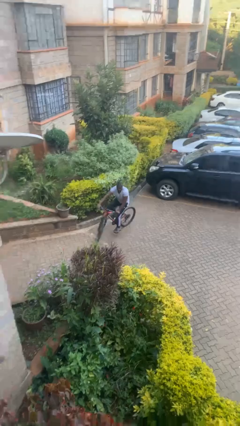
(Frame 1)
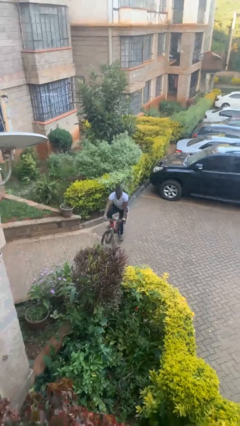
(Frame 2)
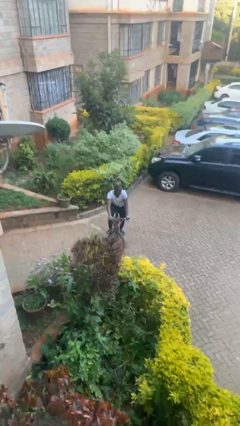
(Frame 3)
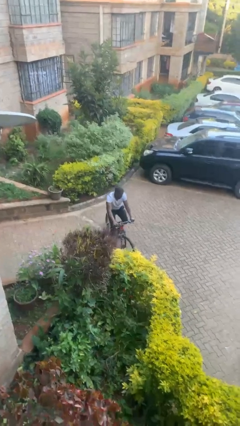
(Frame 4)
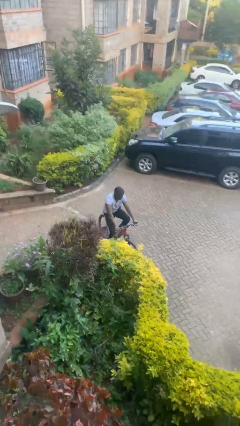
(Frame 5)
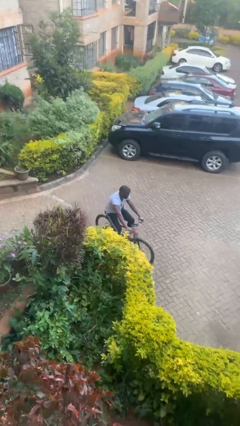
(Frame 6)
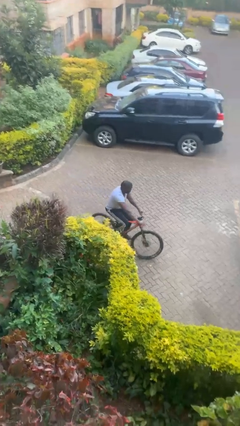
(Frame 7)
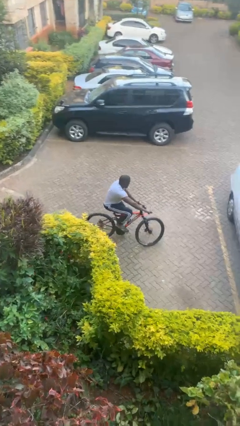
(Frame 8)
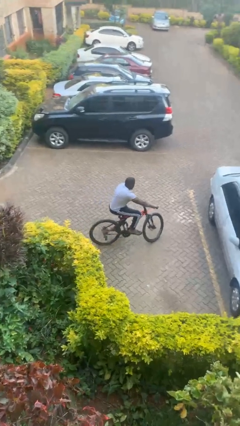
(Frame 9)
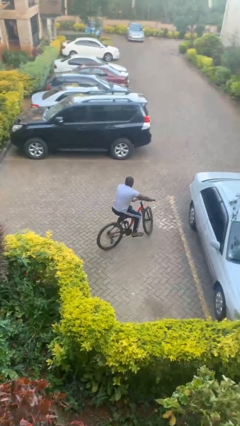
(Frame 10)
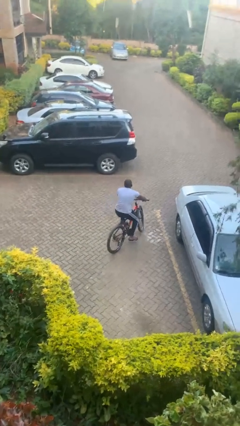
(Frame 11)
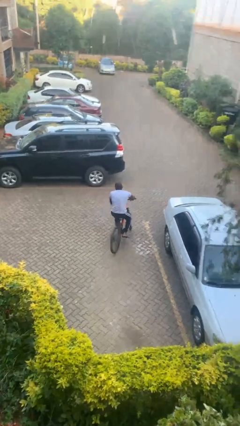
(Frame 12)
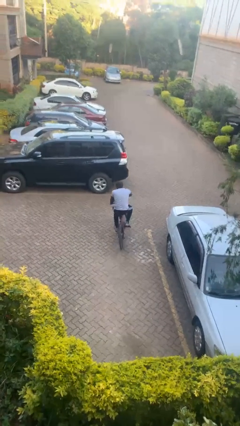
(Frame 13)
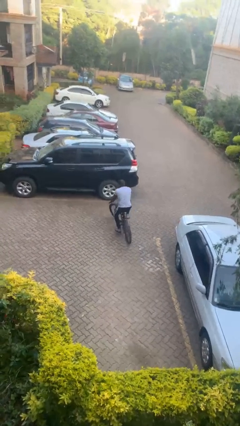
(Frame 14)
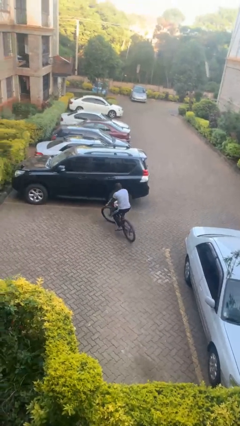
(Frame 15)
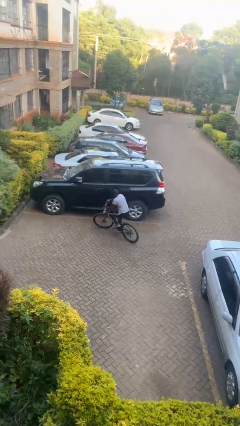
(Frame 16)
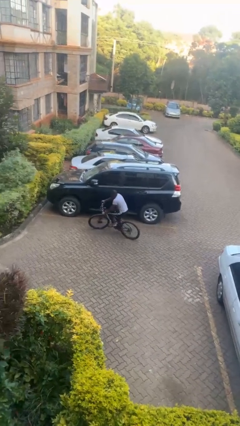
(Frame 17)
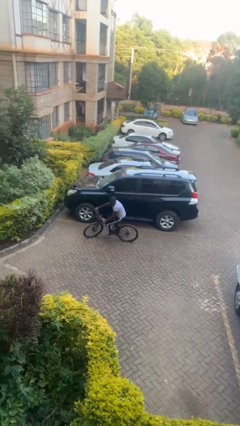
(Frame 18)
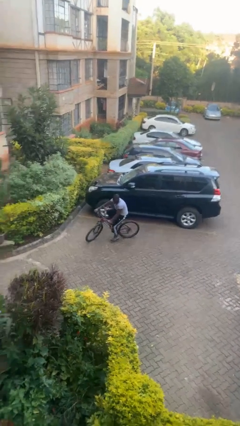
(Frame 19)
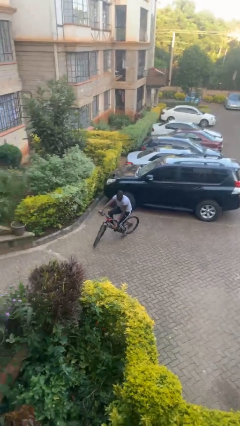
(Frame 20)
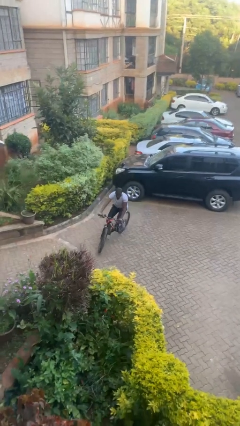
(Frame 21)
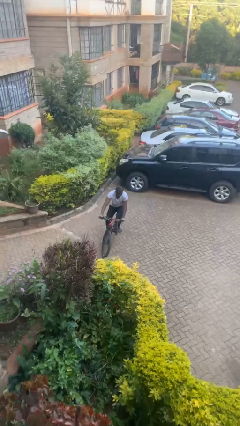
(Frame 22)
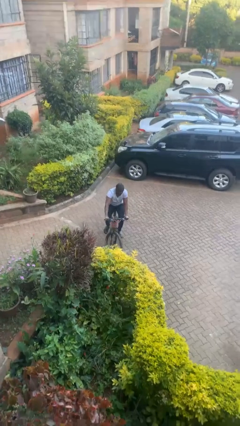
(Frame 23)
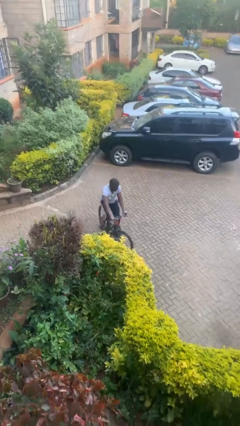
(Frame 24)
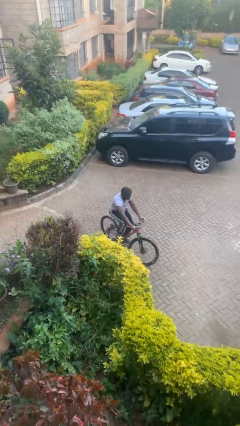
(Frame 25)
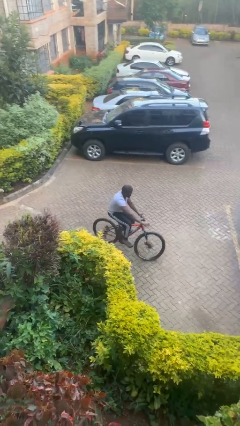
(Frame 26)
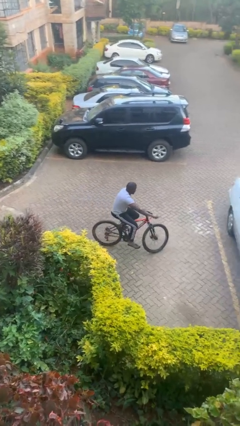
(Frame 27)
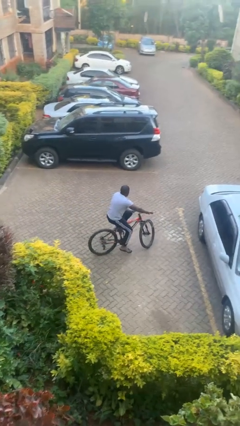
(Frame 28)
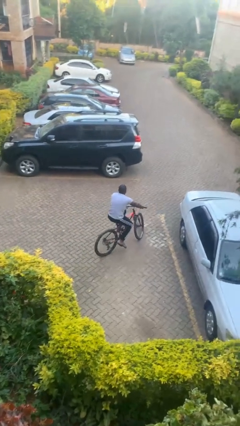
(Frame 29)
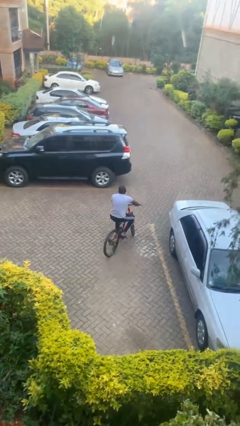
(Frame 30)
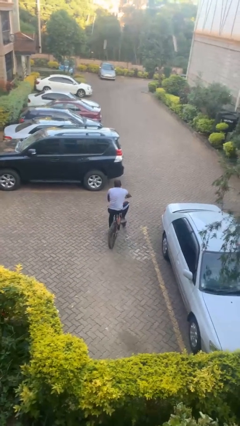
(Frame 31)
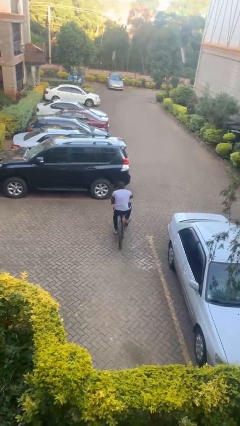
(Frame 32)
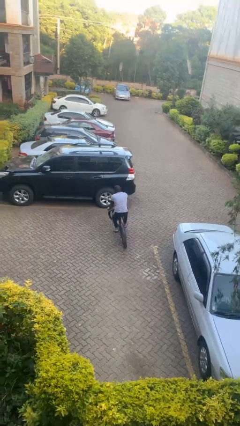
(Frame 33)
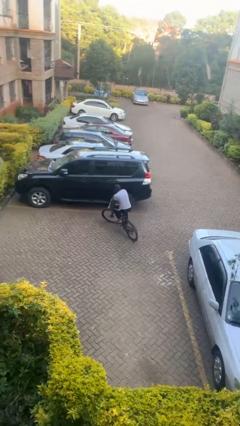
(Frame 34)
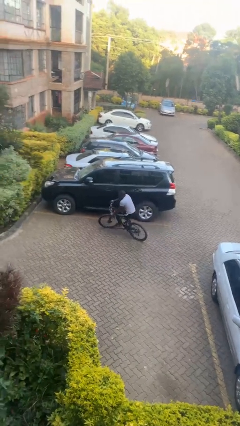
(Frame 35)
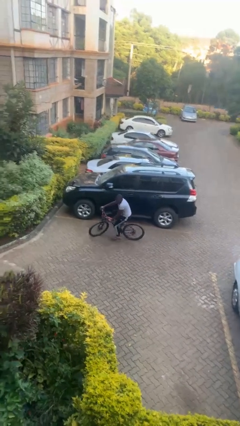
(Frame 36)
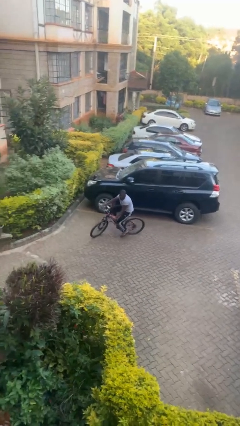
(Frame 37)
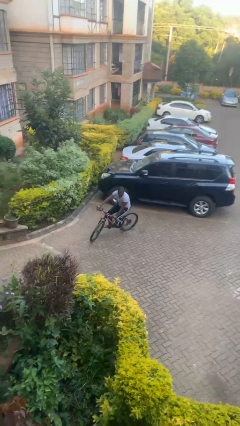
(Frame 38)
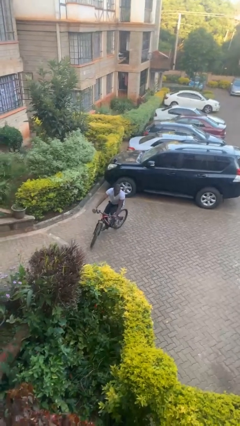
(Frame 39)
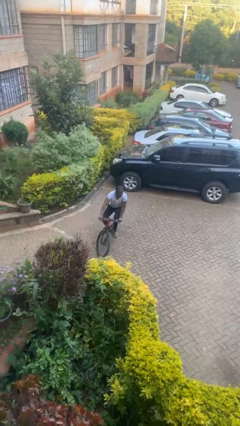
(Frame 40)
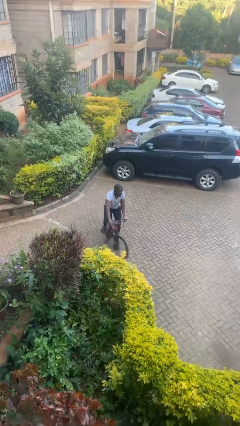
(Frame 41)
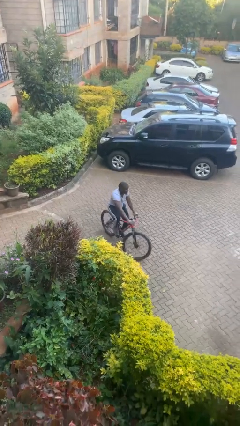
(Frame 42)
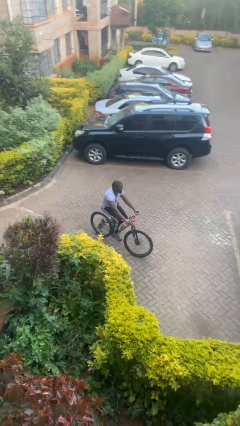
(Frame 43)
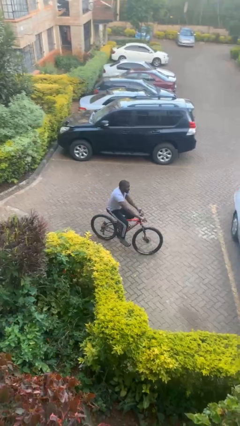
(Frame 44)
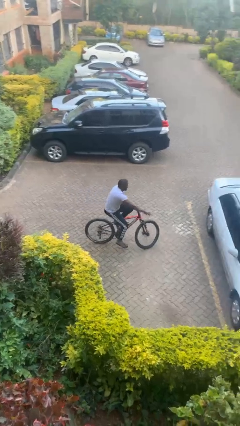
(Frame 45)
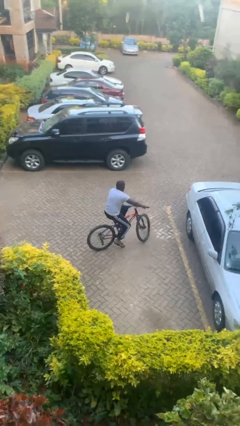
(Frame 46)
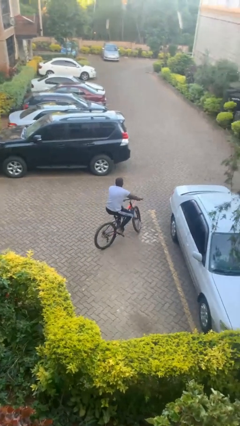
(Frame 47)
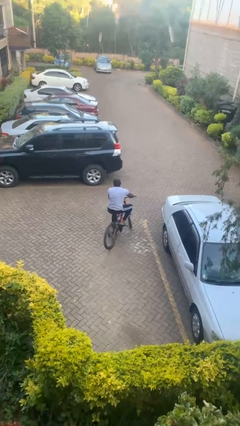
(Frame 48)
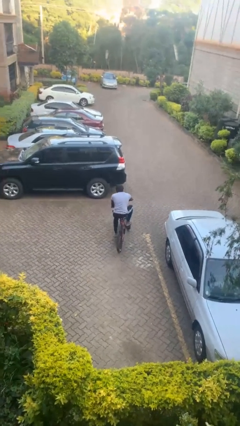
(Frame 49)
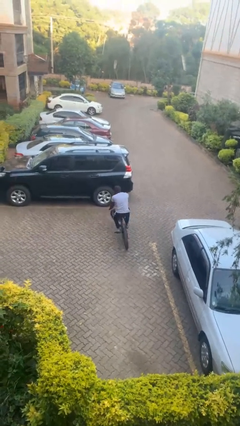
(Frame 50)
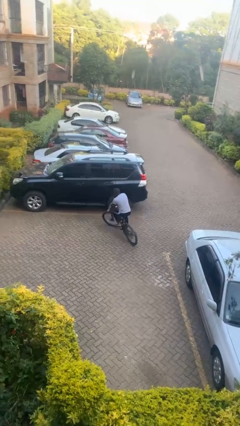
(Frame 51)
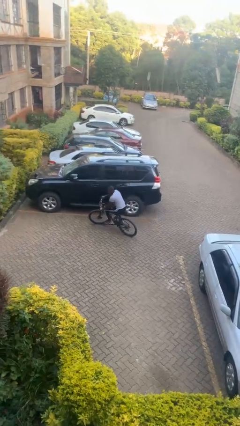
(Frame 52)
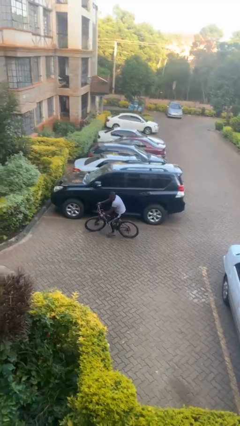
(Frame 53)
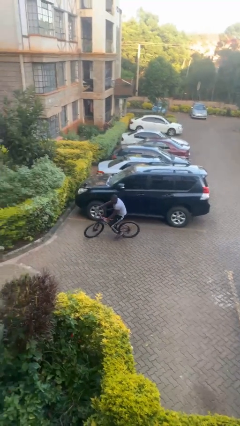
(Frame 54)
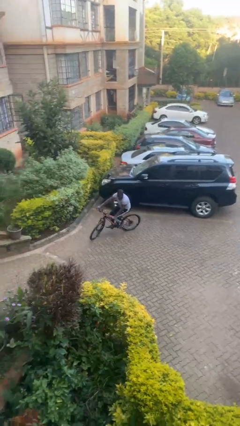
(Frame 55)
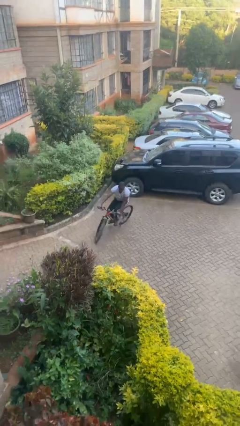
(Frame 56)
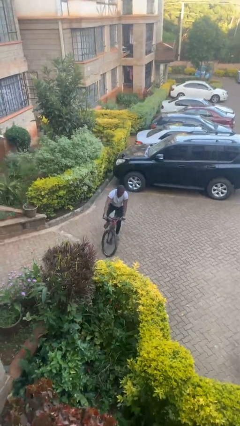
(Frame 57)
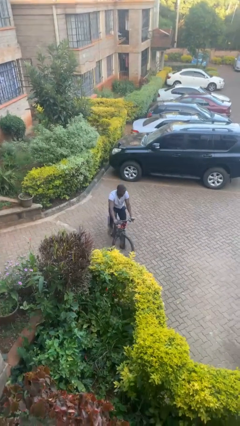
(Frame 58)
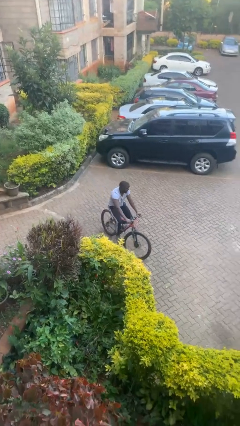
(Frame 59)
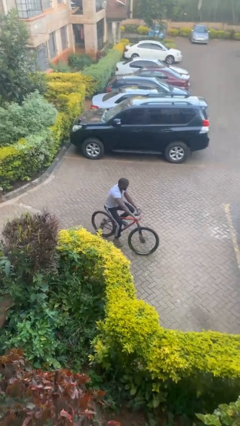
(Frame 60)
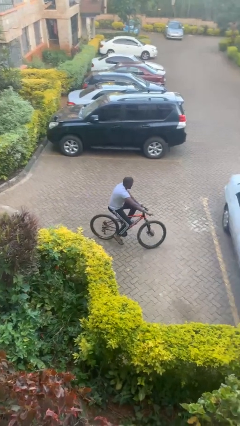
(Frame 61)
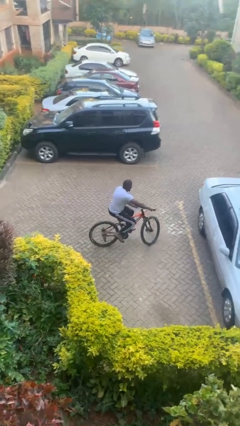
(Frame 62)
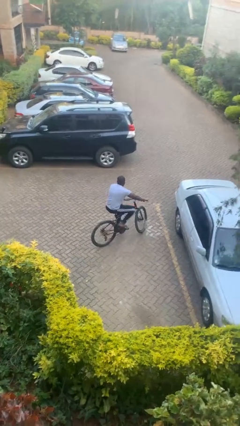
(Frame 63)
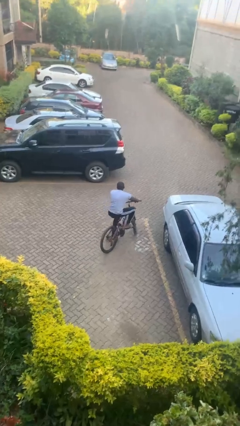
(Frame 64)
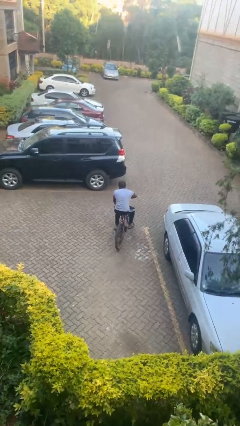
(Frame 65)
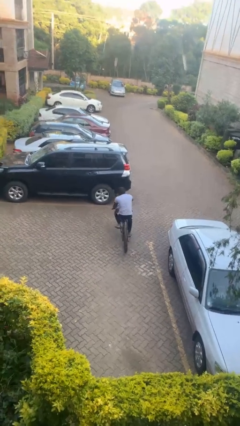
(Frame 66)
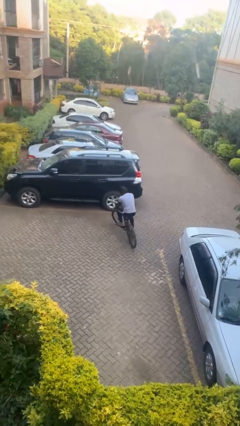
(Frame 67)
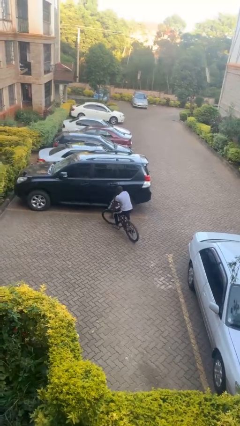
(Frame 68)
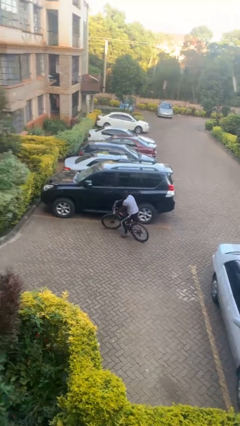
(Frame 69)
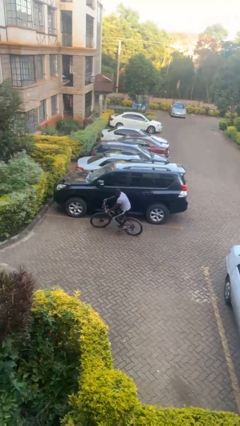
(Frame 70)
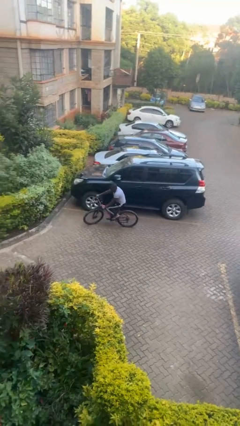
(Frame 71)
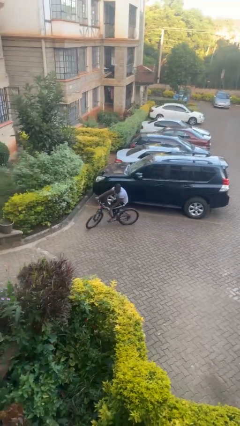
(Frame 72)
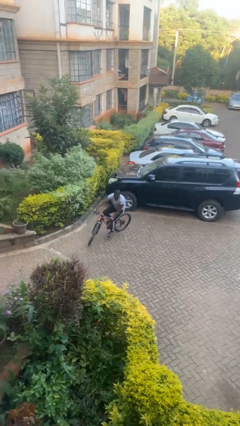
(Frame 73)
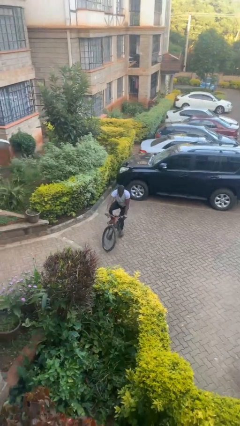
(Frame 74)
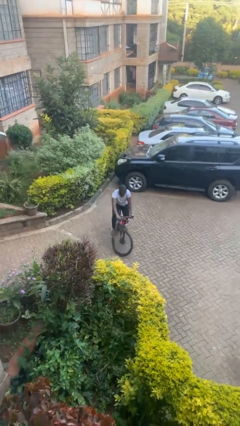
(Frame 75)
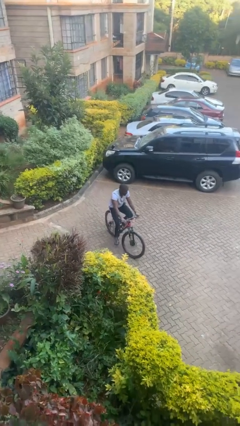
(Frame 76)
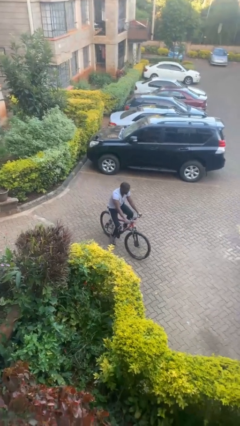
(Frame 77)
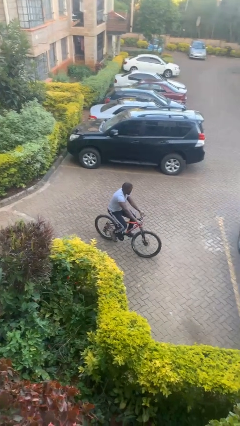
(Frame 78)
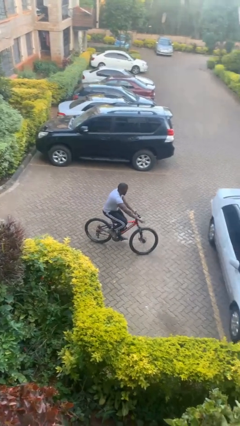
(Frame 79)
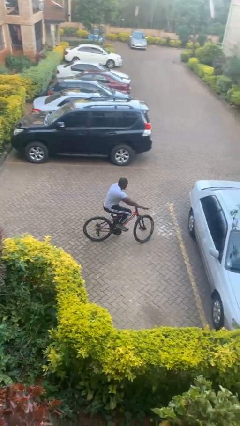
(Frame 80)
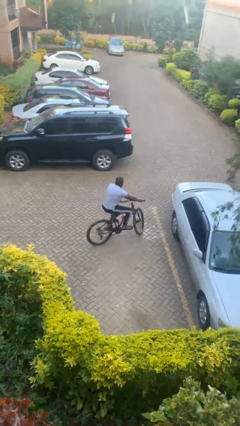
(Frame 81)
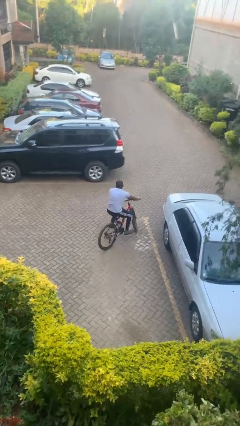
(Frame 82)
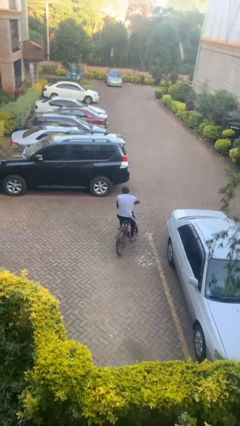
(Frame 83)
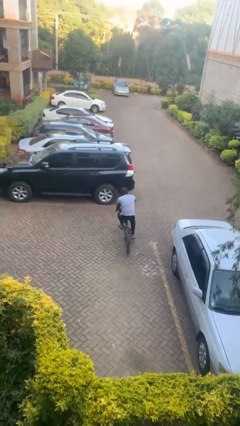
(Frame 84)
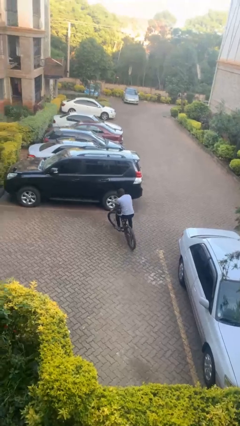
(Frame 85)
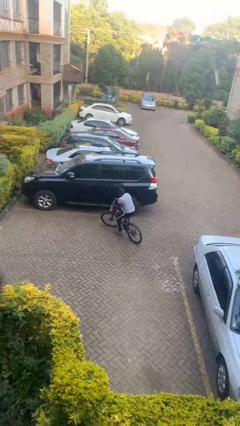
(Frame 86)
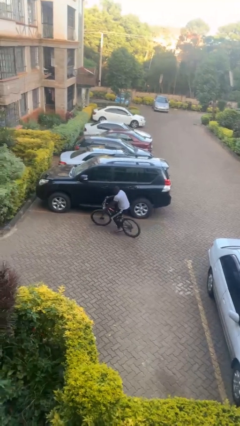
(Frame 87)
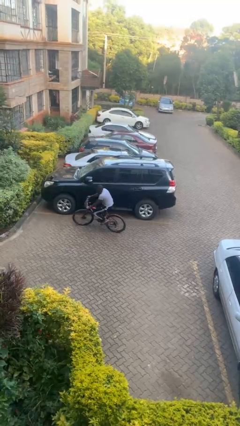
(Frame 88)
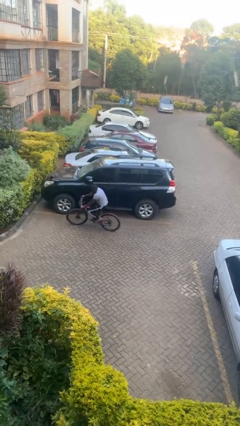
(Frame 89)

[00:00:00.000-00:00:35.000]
person rides bicycle

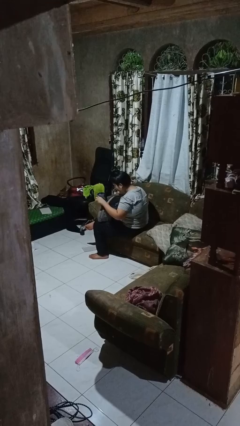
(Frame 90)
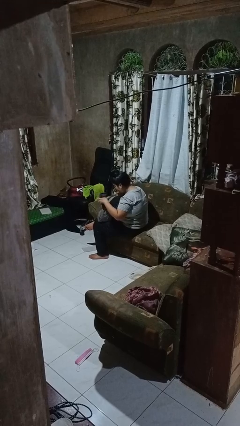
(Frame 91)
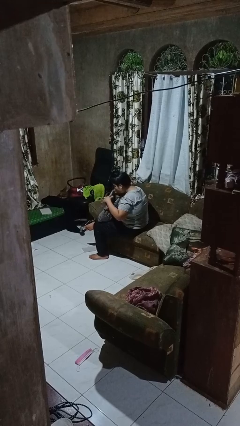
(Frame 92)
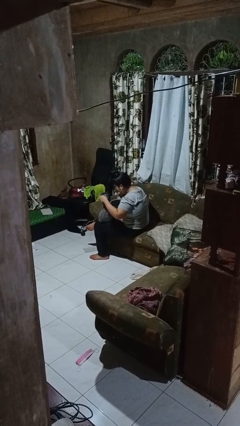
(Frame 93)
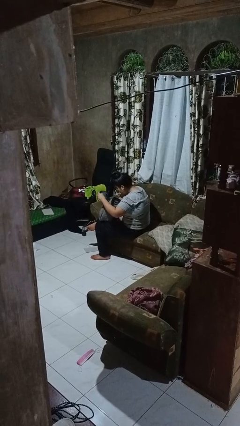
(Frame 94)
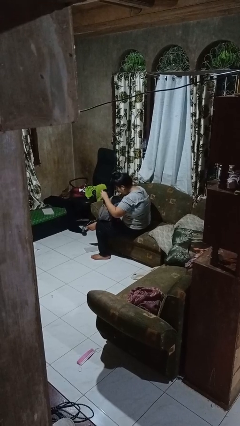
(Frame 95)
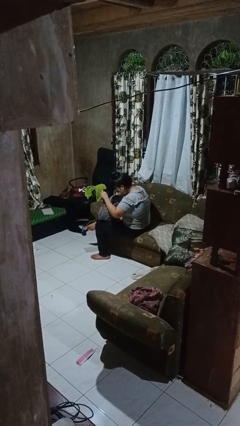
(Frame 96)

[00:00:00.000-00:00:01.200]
person searches in backpack
